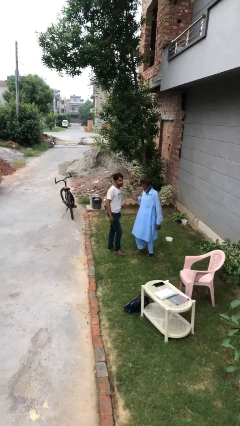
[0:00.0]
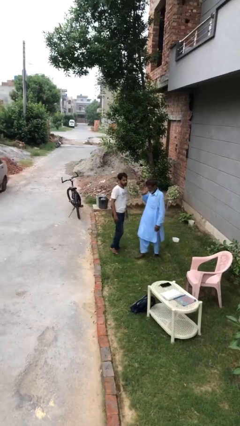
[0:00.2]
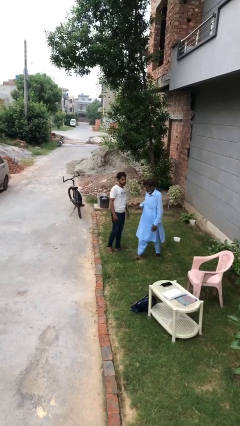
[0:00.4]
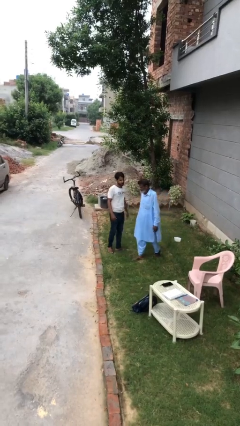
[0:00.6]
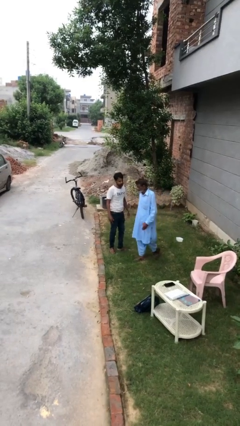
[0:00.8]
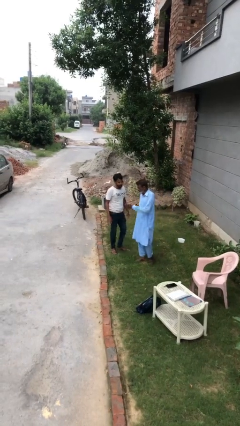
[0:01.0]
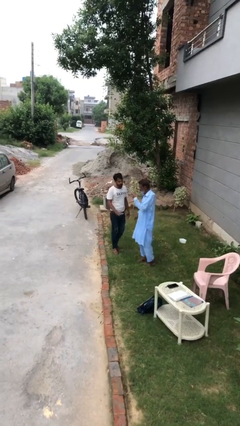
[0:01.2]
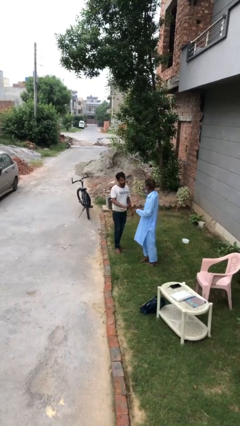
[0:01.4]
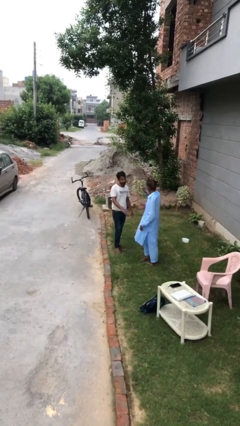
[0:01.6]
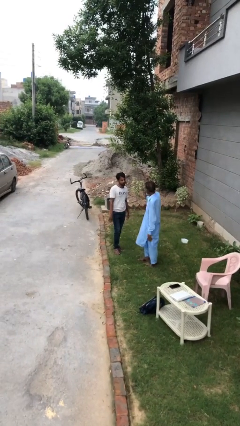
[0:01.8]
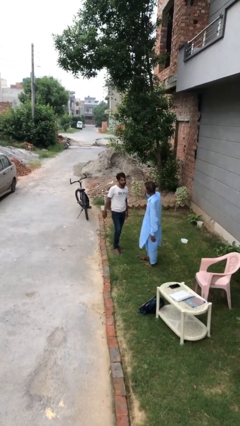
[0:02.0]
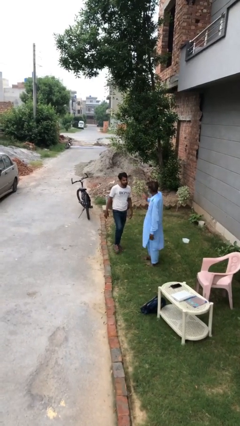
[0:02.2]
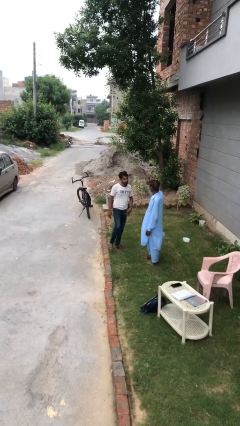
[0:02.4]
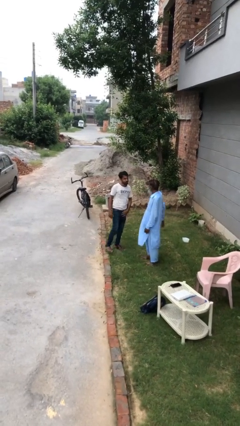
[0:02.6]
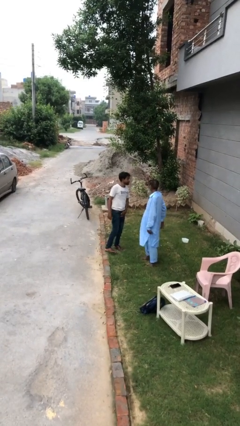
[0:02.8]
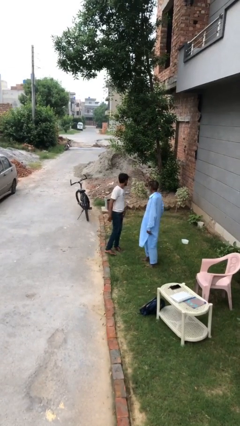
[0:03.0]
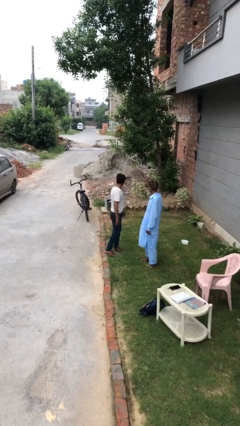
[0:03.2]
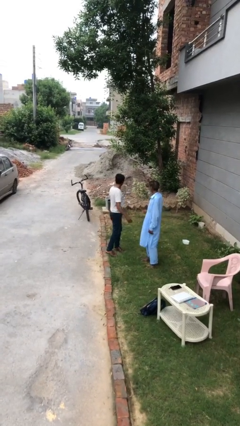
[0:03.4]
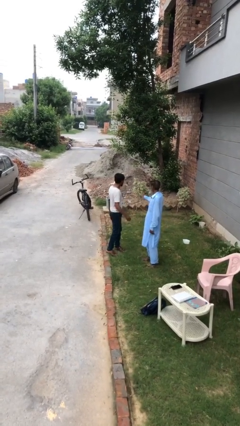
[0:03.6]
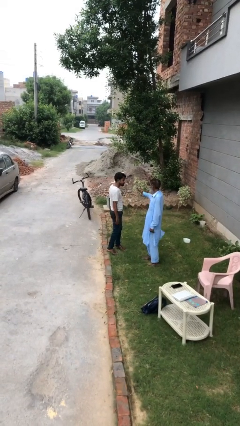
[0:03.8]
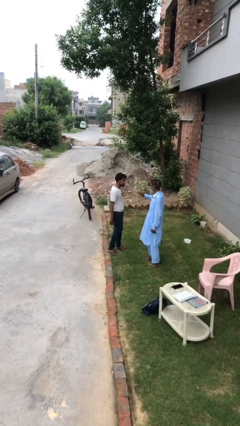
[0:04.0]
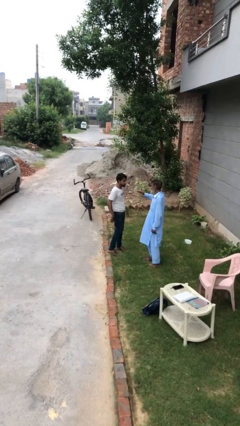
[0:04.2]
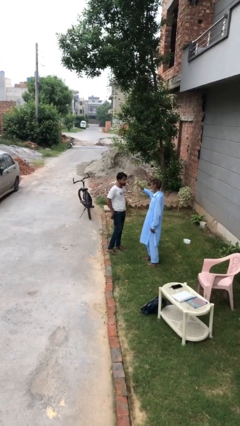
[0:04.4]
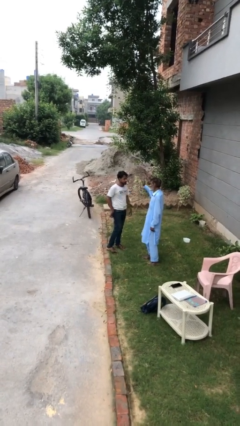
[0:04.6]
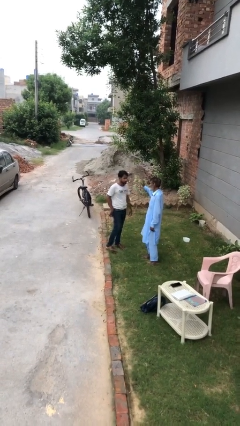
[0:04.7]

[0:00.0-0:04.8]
person talks to person

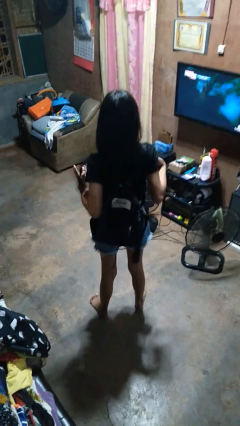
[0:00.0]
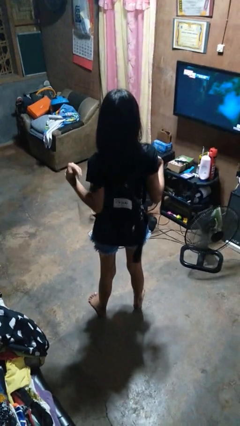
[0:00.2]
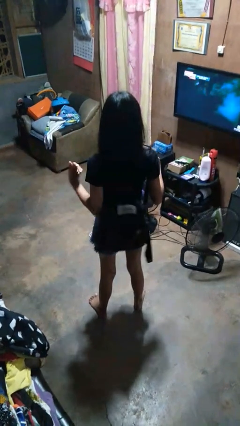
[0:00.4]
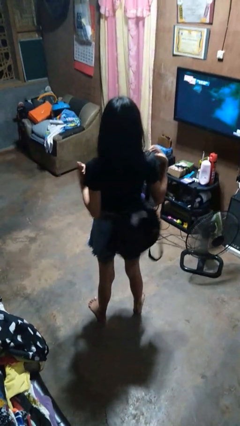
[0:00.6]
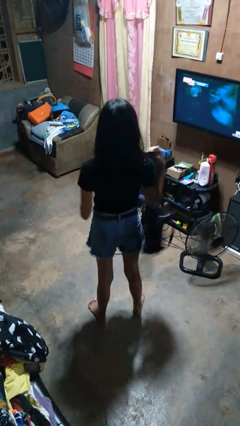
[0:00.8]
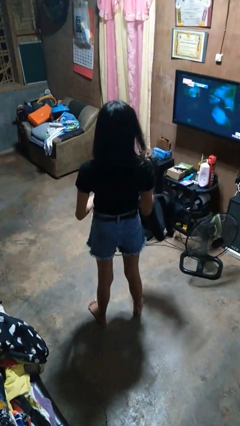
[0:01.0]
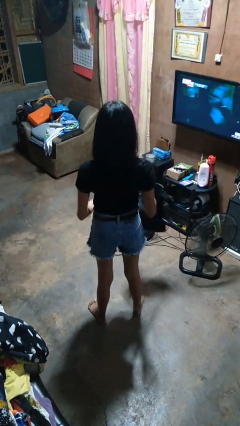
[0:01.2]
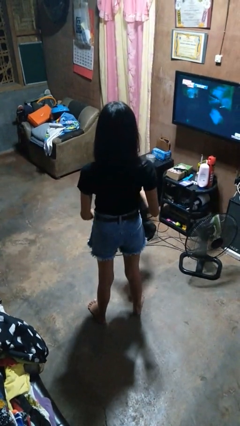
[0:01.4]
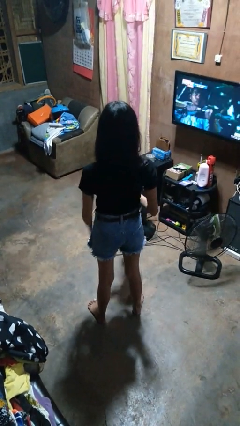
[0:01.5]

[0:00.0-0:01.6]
person takes off backpack

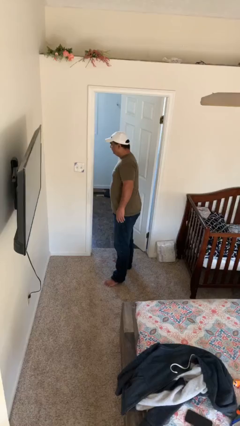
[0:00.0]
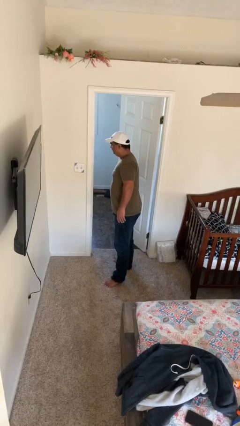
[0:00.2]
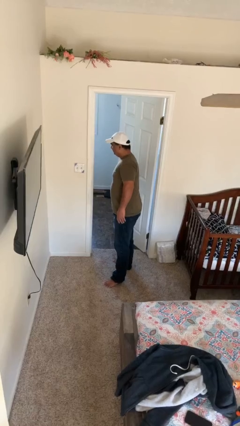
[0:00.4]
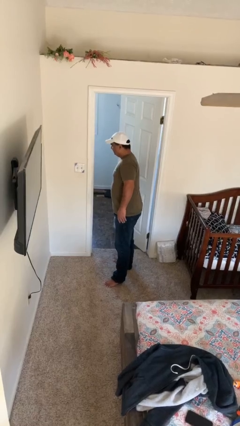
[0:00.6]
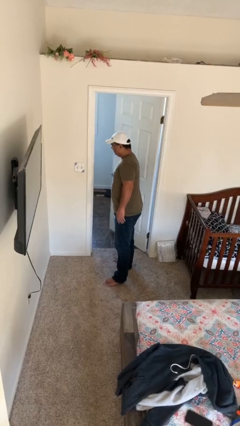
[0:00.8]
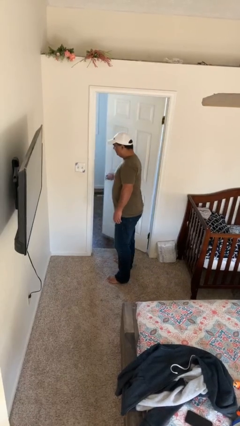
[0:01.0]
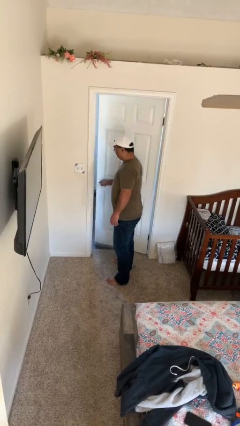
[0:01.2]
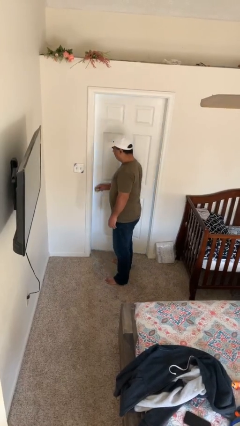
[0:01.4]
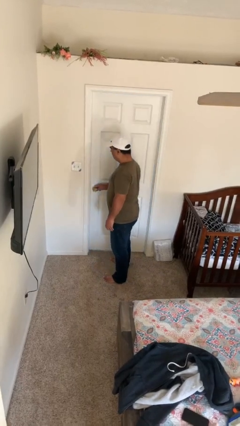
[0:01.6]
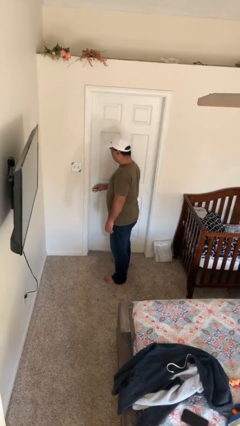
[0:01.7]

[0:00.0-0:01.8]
person closes facility door

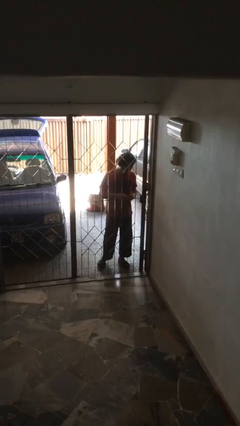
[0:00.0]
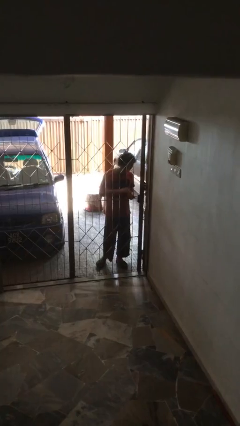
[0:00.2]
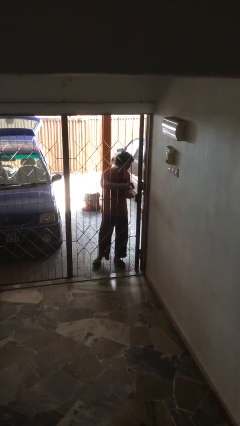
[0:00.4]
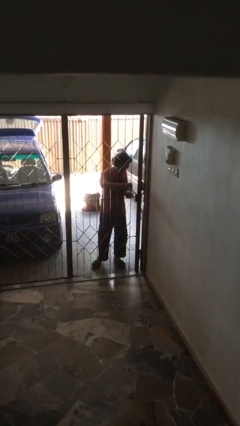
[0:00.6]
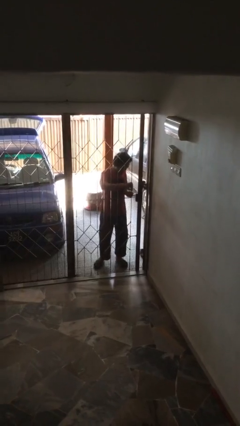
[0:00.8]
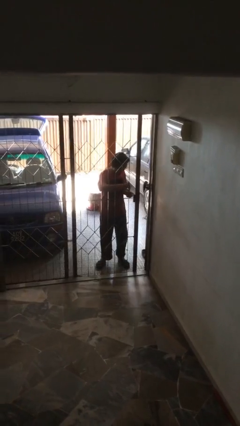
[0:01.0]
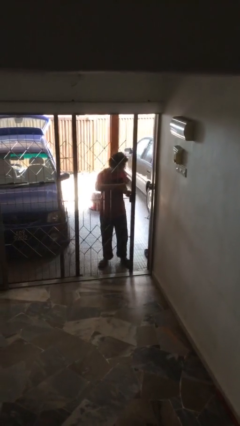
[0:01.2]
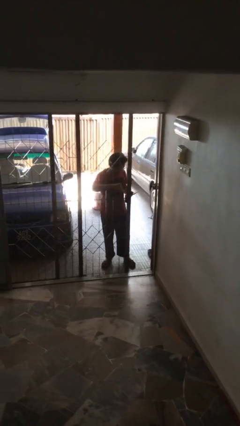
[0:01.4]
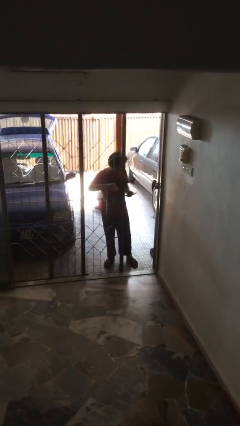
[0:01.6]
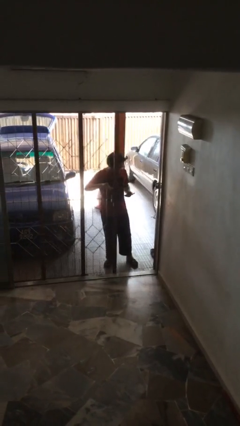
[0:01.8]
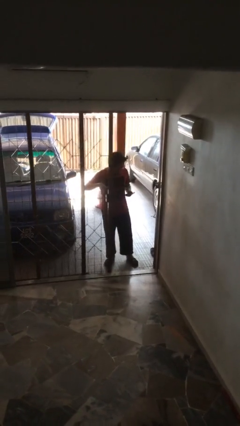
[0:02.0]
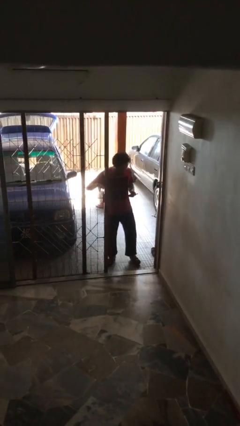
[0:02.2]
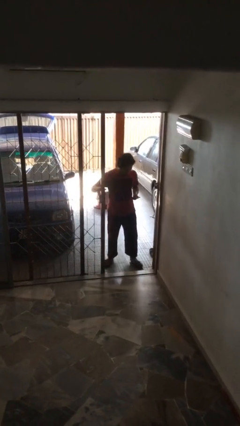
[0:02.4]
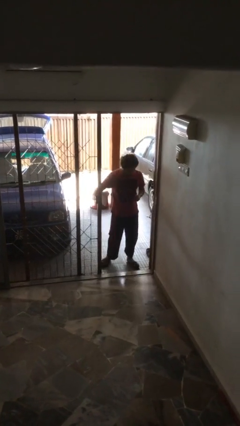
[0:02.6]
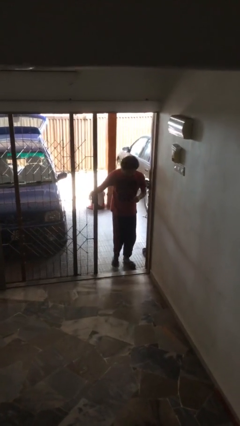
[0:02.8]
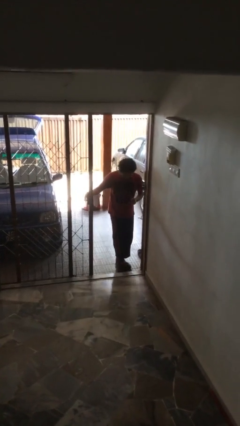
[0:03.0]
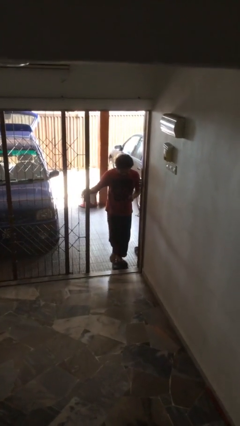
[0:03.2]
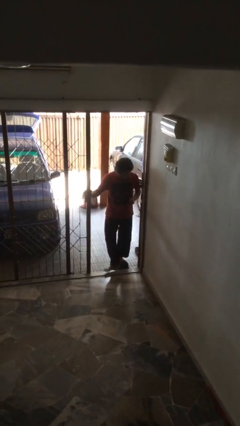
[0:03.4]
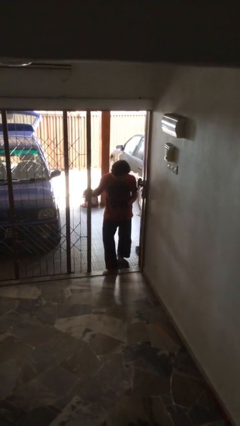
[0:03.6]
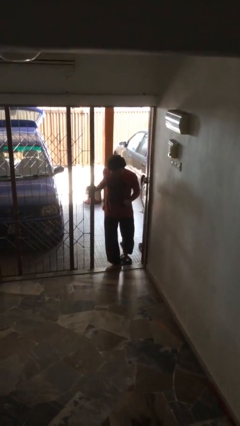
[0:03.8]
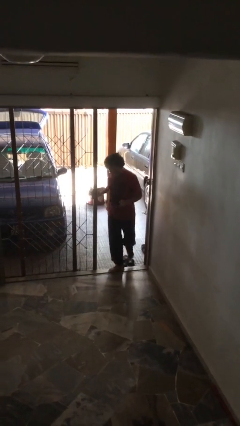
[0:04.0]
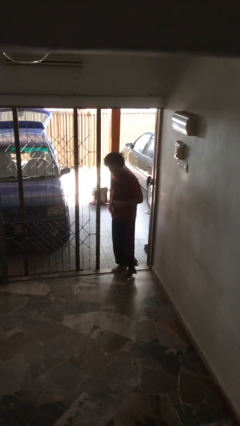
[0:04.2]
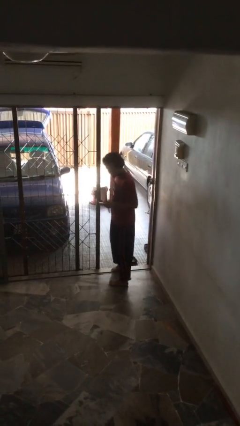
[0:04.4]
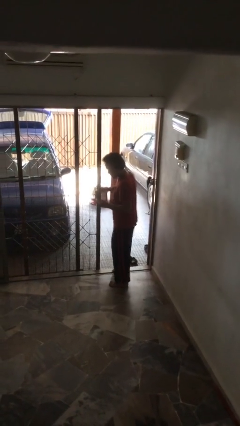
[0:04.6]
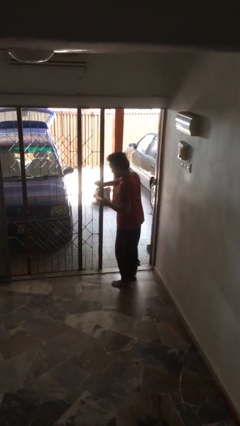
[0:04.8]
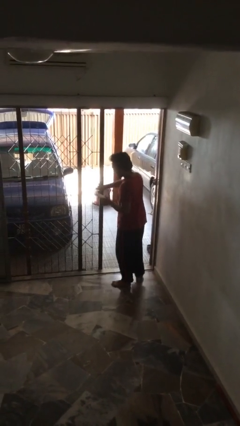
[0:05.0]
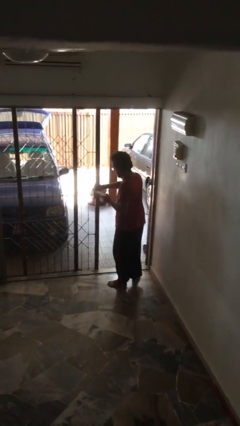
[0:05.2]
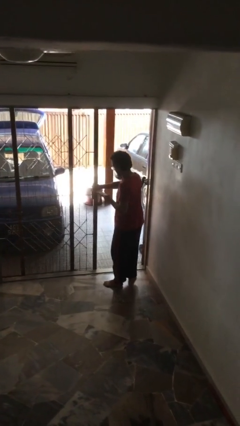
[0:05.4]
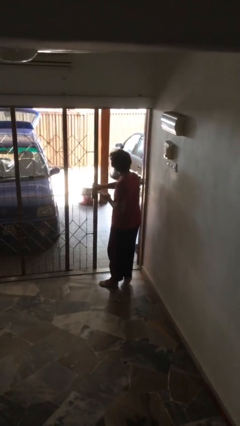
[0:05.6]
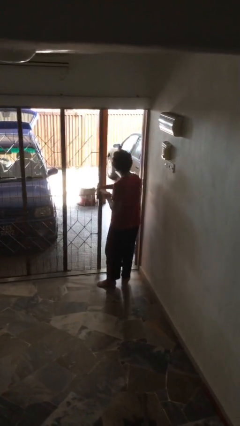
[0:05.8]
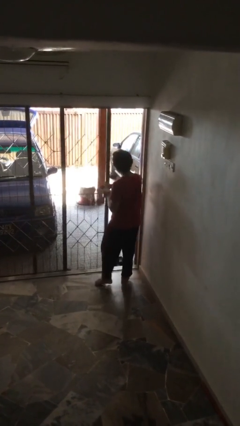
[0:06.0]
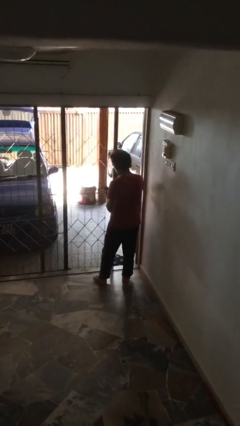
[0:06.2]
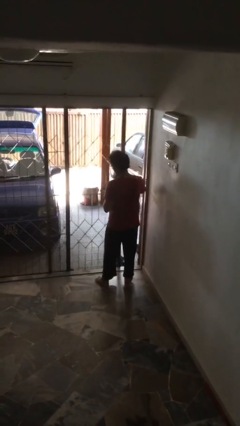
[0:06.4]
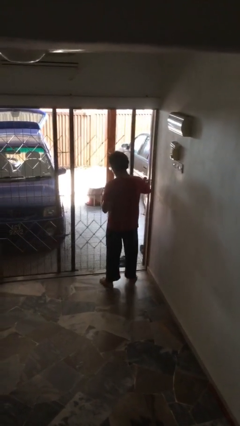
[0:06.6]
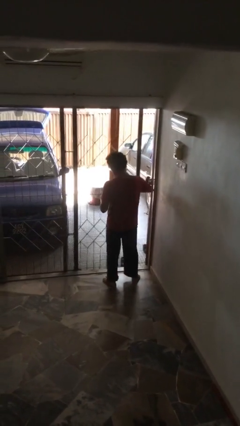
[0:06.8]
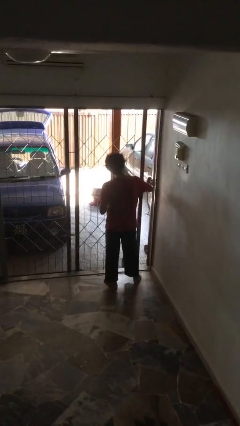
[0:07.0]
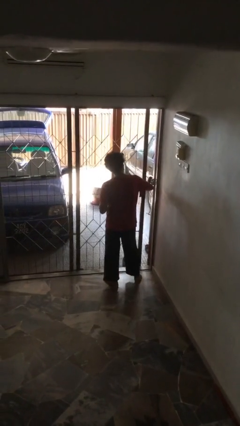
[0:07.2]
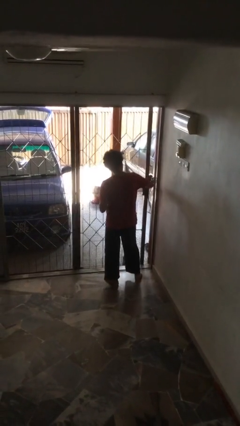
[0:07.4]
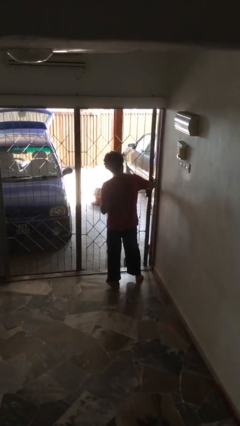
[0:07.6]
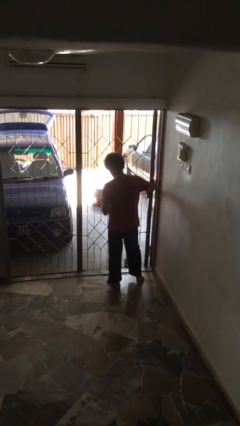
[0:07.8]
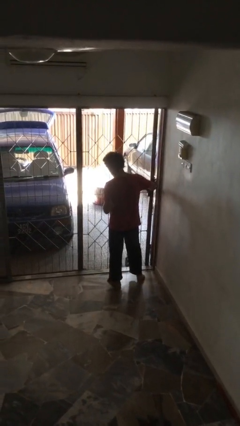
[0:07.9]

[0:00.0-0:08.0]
person texts on phone

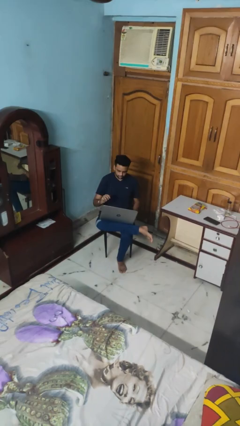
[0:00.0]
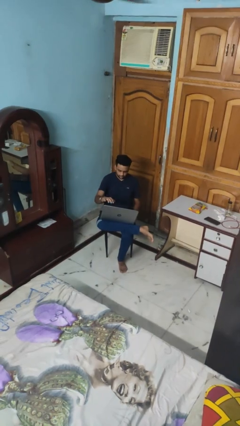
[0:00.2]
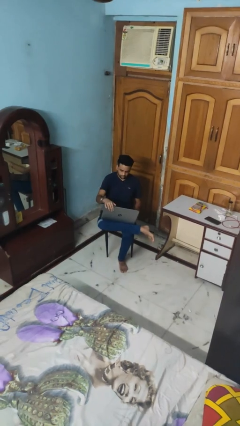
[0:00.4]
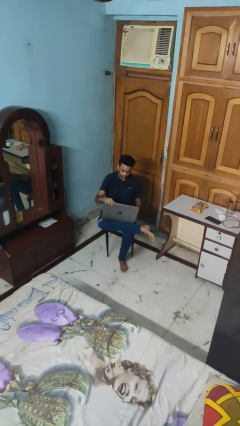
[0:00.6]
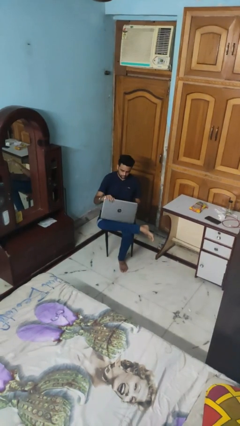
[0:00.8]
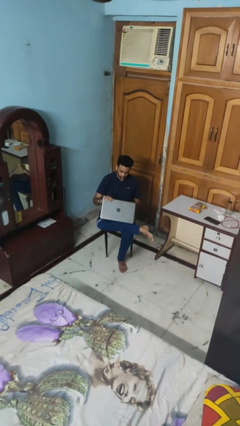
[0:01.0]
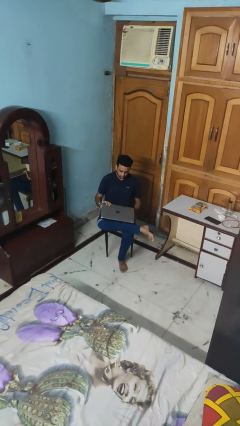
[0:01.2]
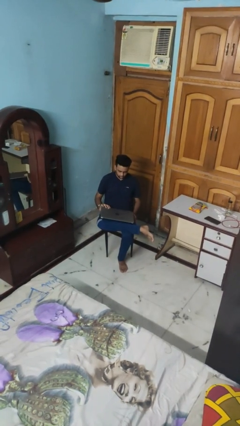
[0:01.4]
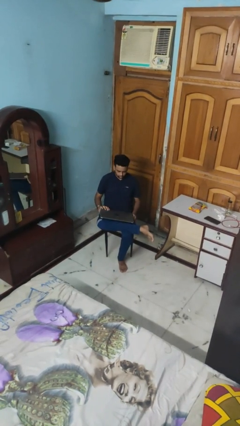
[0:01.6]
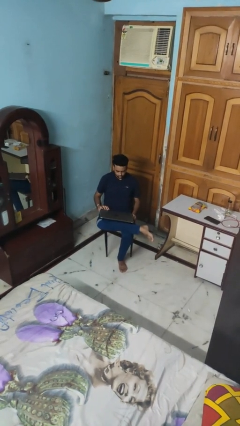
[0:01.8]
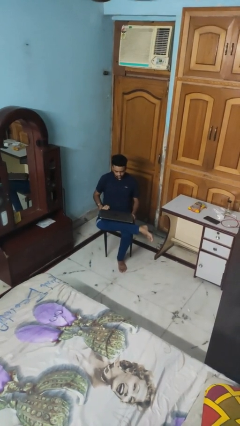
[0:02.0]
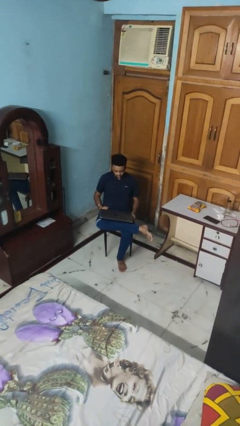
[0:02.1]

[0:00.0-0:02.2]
person closes laptop
